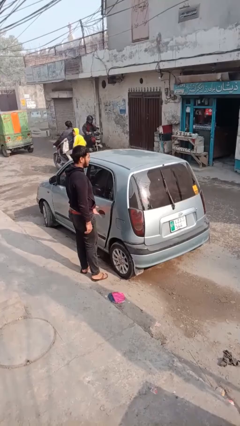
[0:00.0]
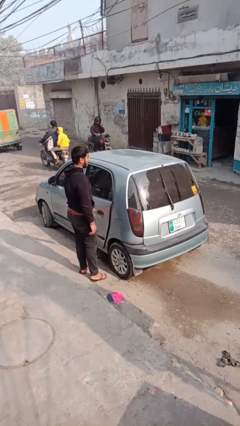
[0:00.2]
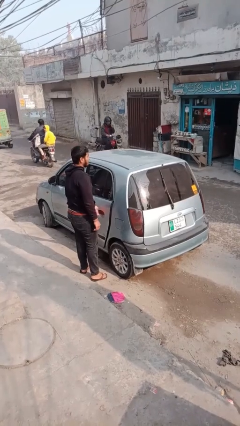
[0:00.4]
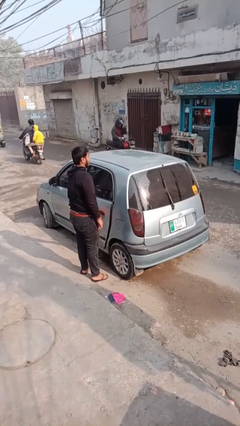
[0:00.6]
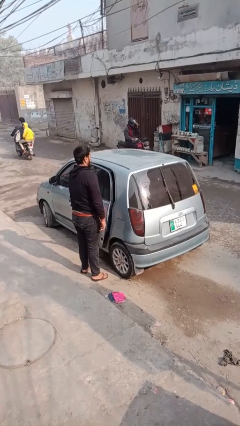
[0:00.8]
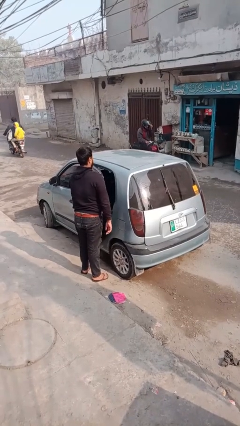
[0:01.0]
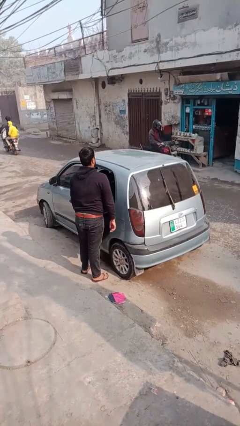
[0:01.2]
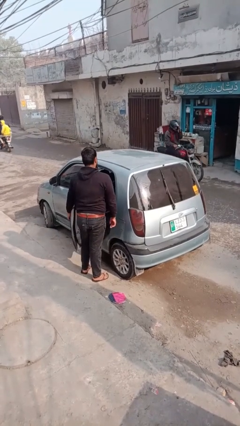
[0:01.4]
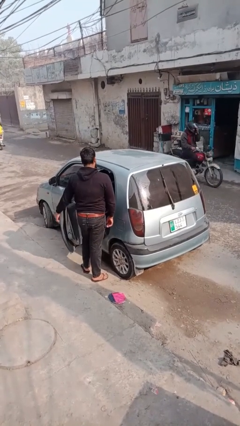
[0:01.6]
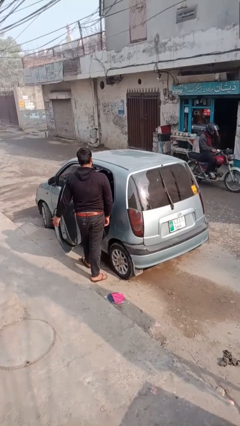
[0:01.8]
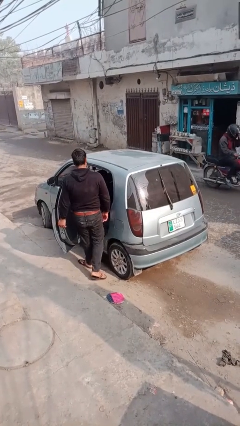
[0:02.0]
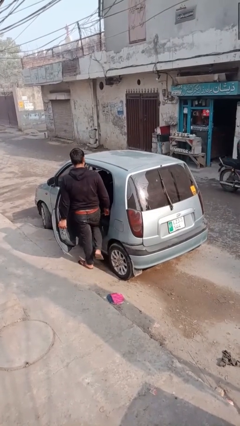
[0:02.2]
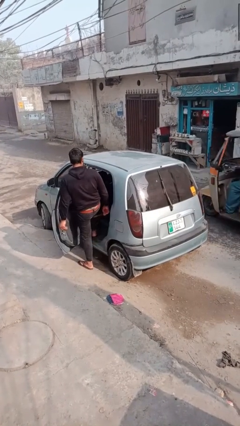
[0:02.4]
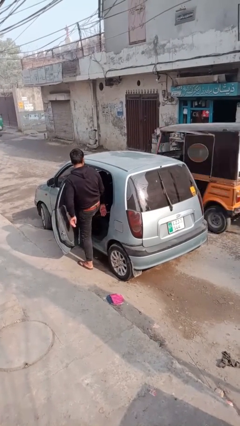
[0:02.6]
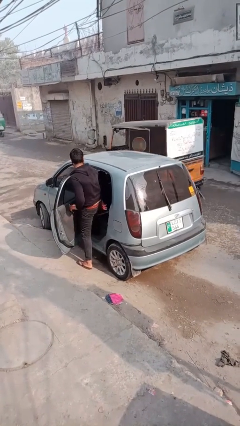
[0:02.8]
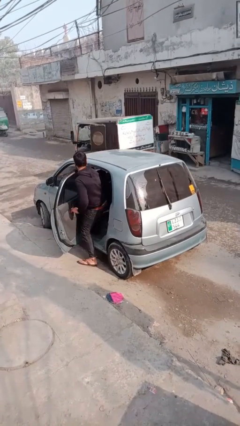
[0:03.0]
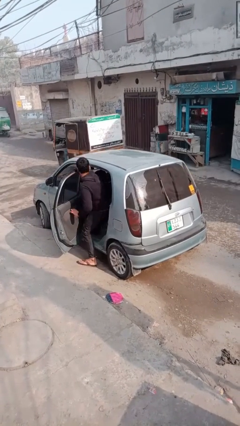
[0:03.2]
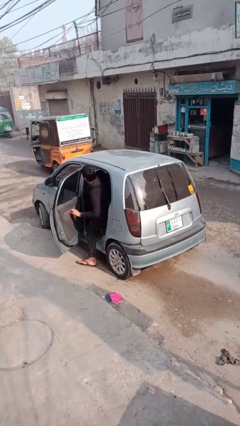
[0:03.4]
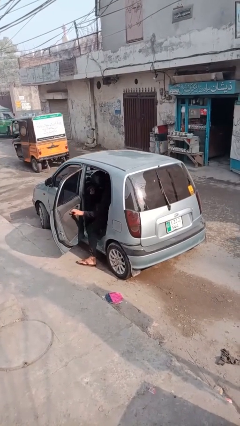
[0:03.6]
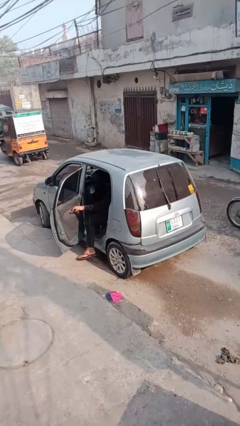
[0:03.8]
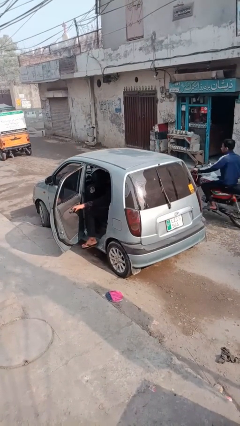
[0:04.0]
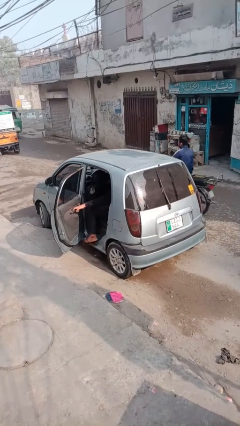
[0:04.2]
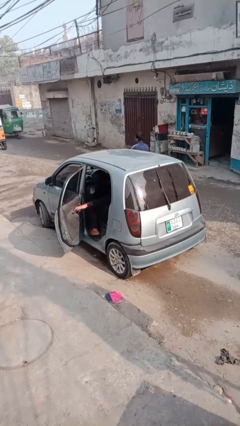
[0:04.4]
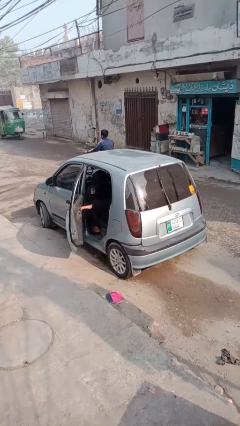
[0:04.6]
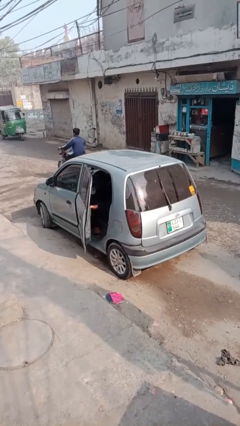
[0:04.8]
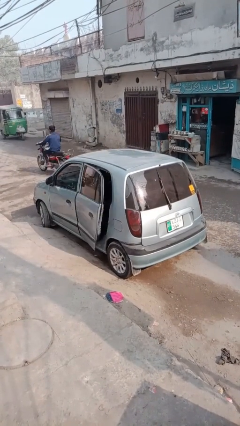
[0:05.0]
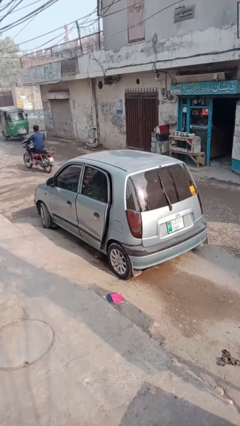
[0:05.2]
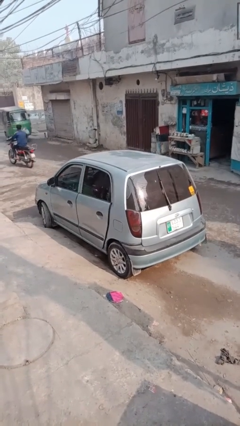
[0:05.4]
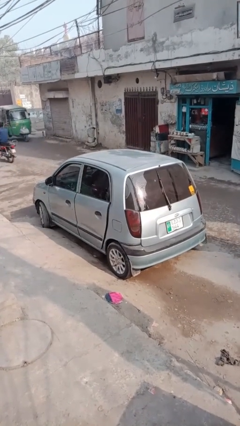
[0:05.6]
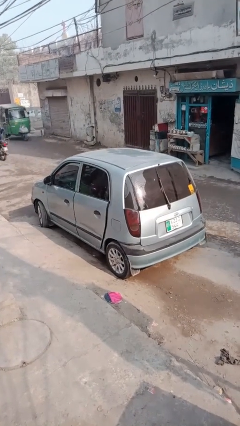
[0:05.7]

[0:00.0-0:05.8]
car picks up person

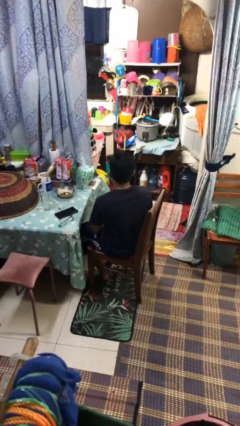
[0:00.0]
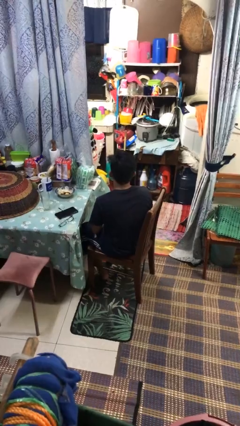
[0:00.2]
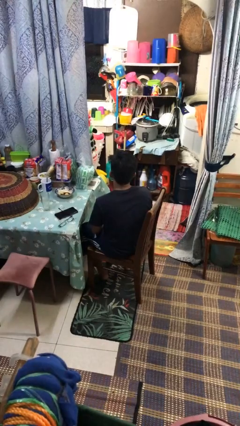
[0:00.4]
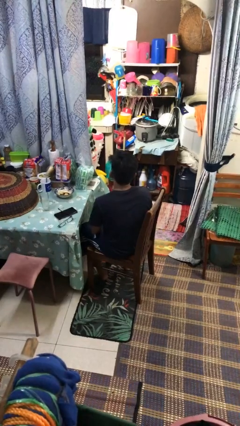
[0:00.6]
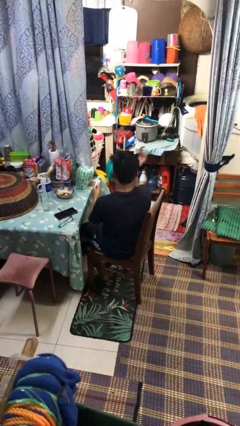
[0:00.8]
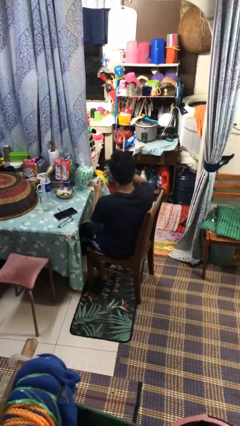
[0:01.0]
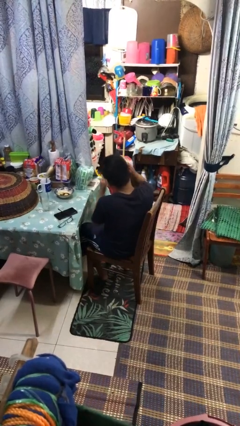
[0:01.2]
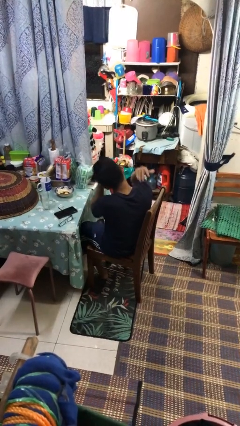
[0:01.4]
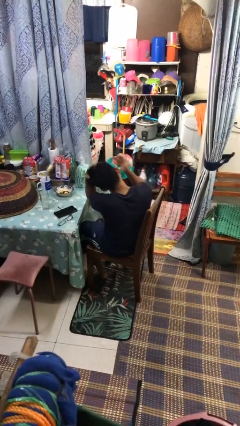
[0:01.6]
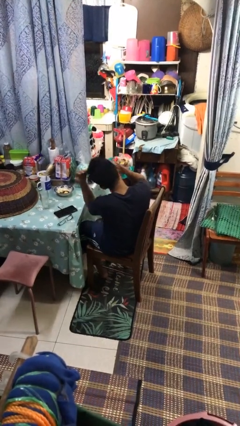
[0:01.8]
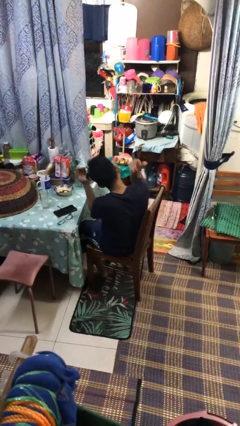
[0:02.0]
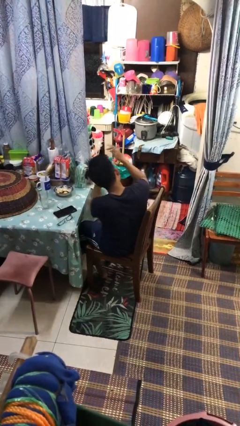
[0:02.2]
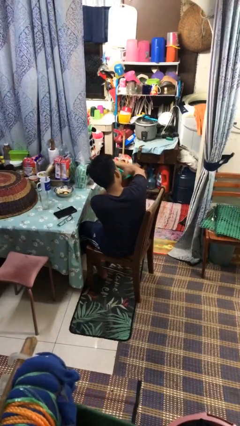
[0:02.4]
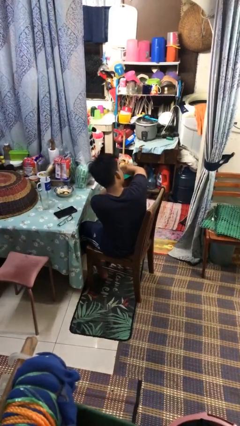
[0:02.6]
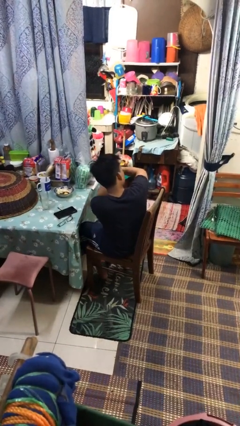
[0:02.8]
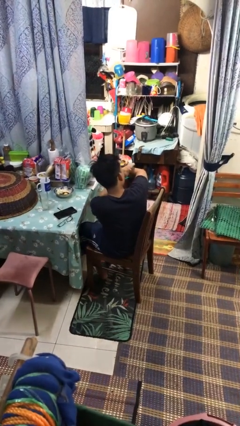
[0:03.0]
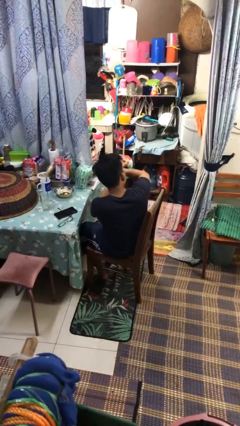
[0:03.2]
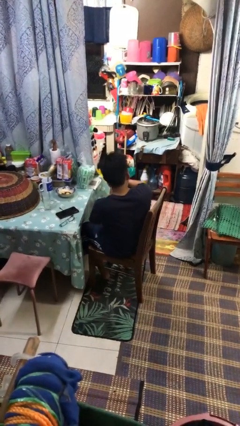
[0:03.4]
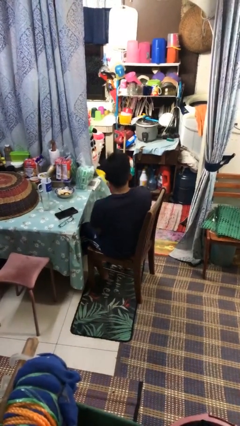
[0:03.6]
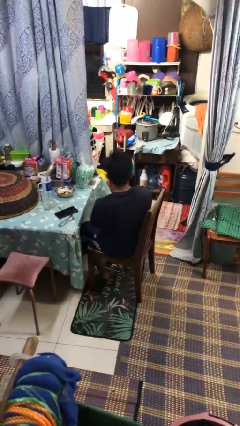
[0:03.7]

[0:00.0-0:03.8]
person swats bug

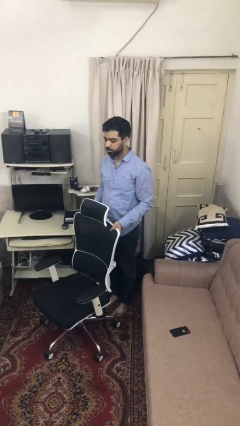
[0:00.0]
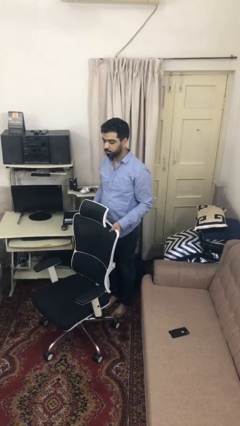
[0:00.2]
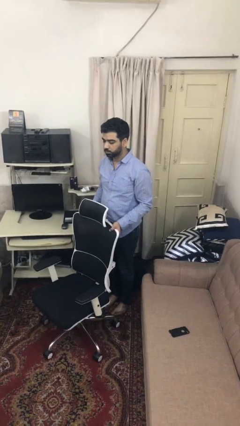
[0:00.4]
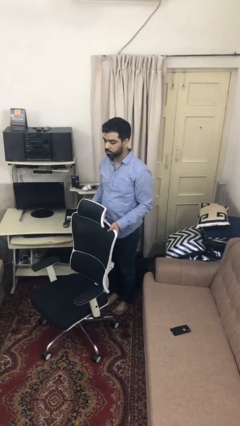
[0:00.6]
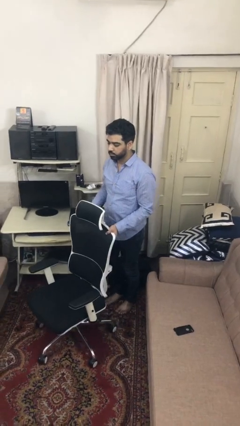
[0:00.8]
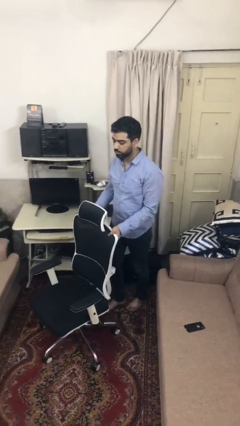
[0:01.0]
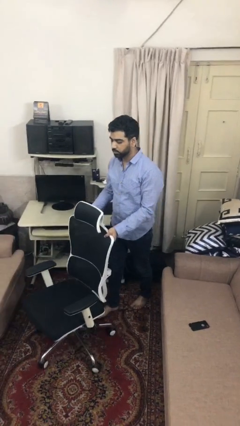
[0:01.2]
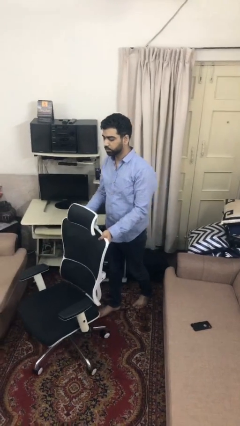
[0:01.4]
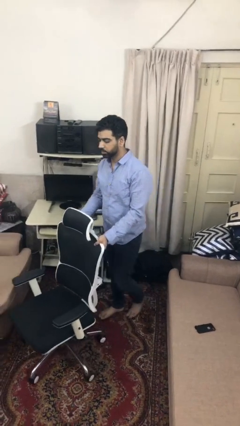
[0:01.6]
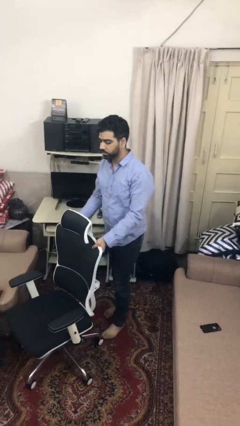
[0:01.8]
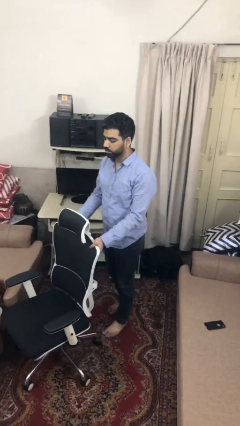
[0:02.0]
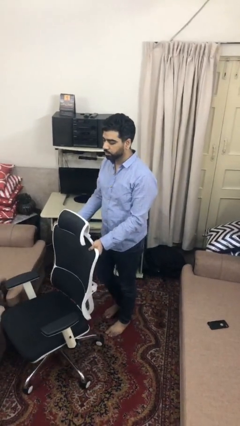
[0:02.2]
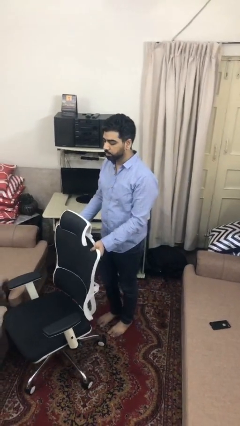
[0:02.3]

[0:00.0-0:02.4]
person pushes wheeled cart

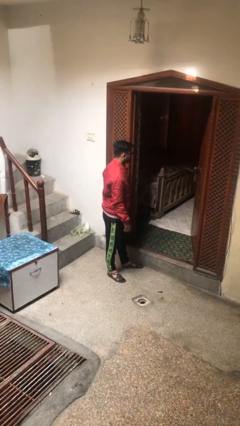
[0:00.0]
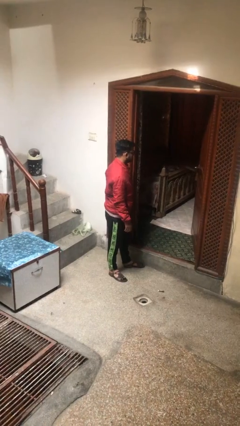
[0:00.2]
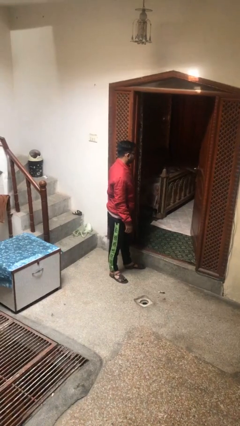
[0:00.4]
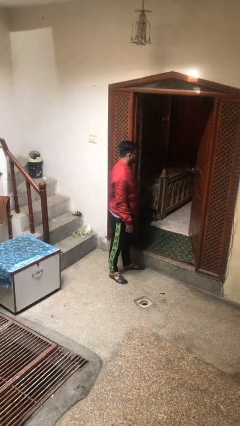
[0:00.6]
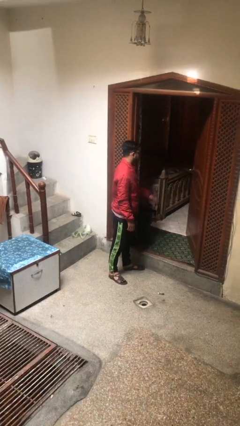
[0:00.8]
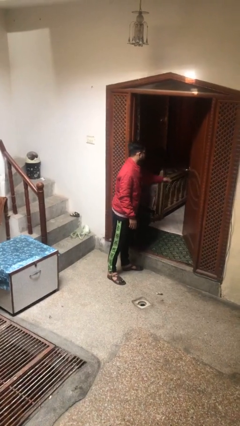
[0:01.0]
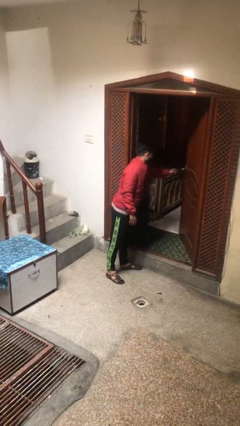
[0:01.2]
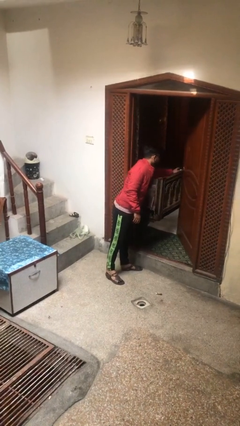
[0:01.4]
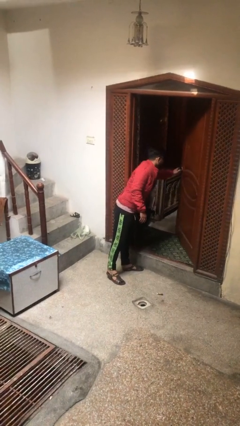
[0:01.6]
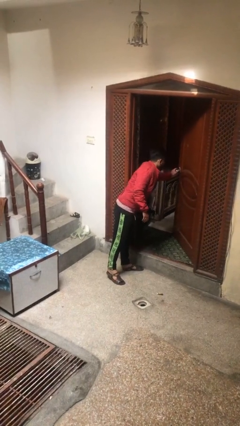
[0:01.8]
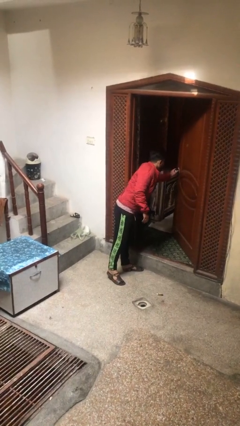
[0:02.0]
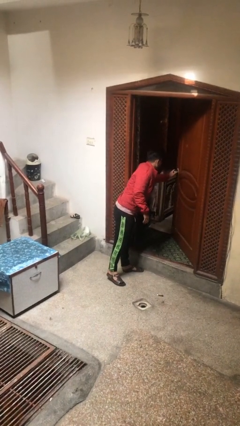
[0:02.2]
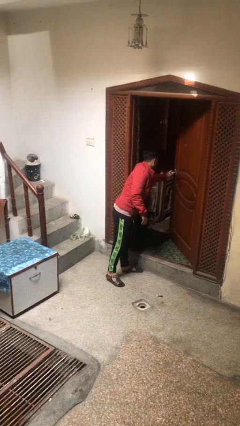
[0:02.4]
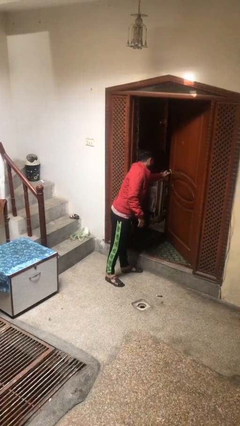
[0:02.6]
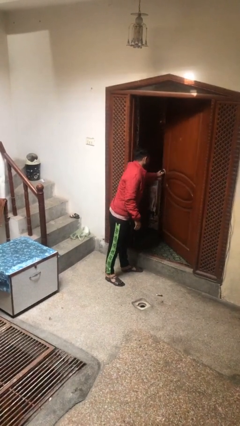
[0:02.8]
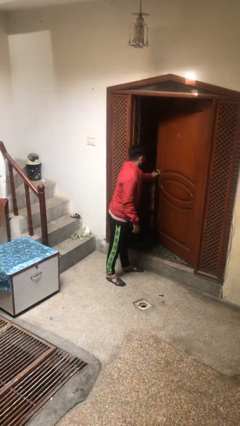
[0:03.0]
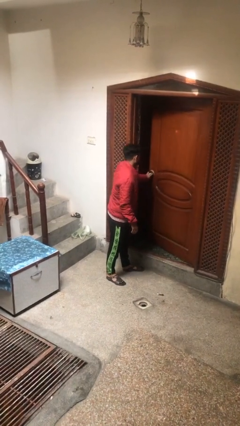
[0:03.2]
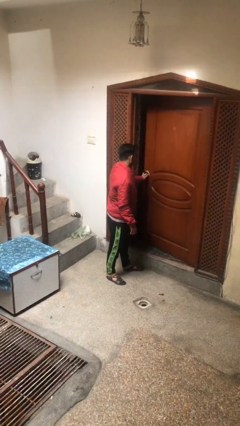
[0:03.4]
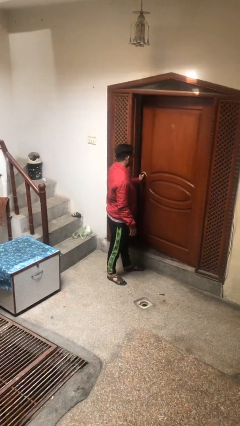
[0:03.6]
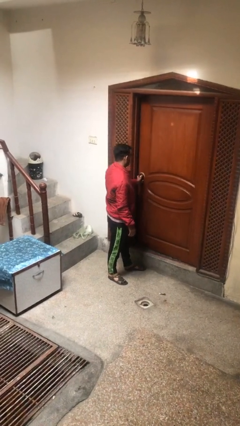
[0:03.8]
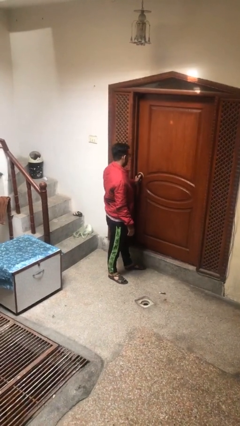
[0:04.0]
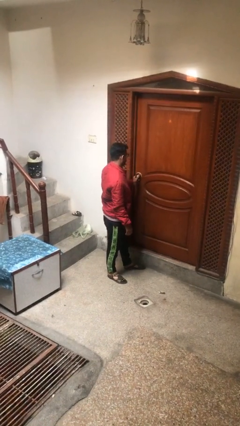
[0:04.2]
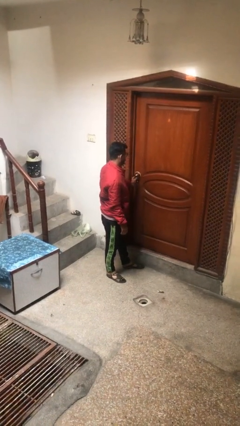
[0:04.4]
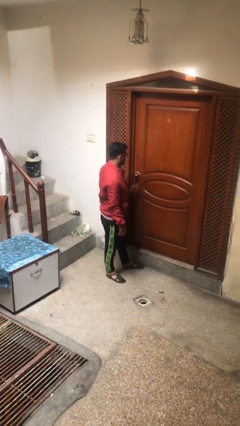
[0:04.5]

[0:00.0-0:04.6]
person closes facility door

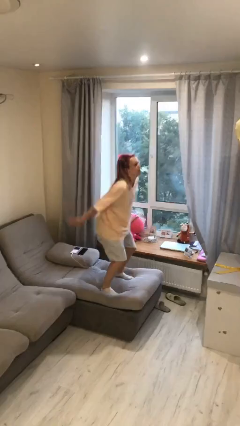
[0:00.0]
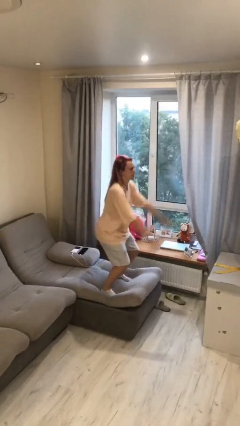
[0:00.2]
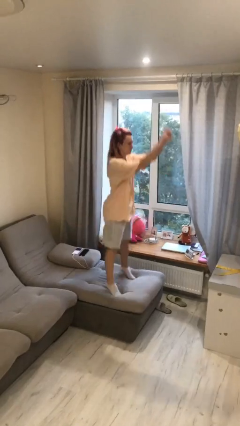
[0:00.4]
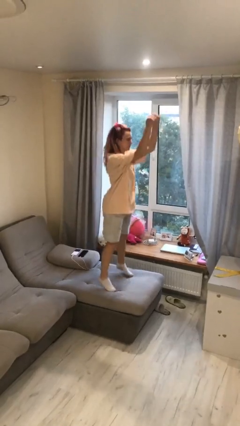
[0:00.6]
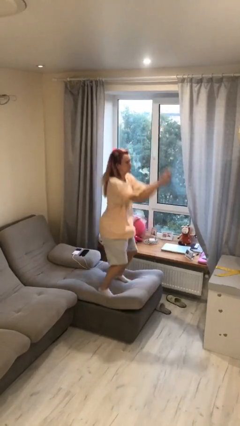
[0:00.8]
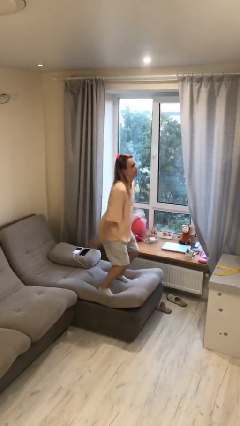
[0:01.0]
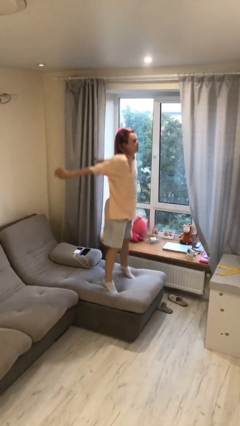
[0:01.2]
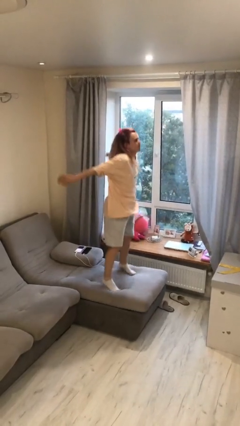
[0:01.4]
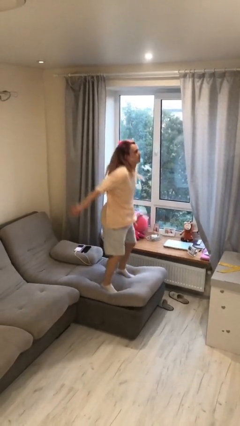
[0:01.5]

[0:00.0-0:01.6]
person jumps on couch
